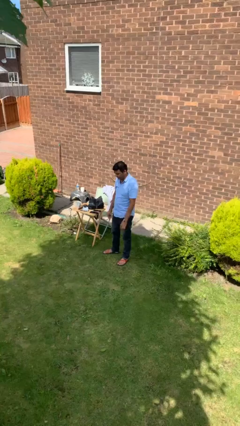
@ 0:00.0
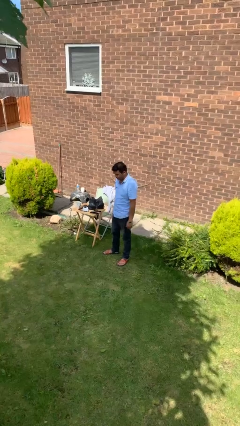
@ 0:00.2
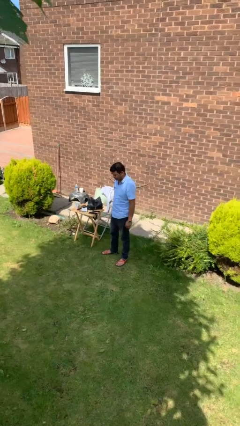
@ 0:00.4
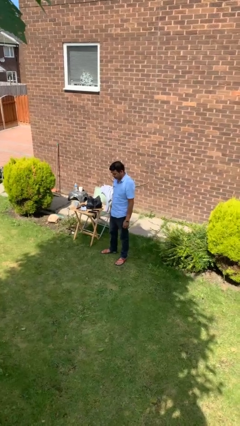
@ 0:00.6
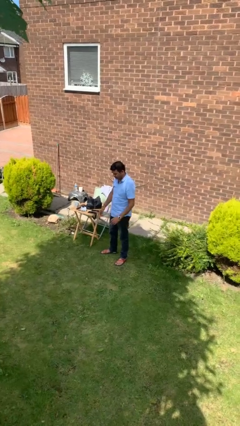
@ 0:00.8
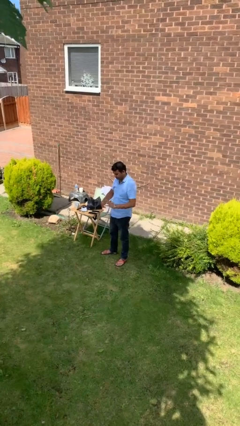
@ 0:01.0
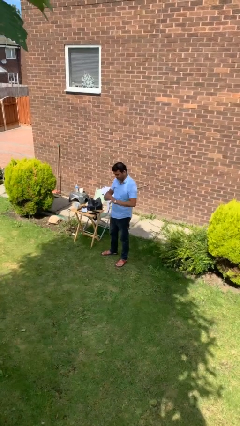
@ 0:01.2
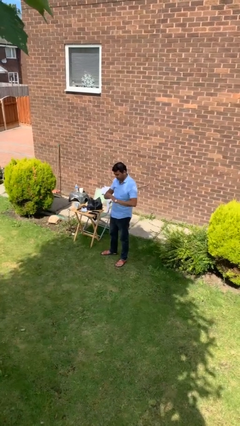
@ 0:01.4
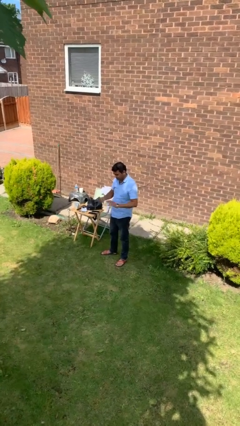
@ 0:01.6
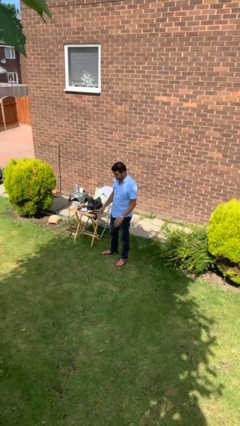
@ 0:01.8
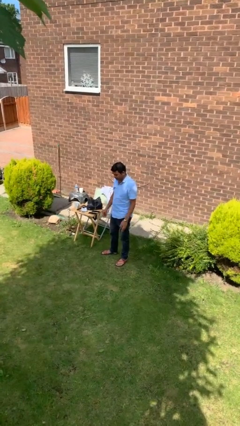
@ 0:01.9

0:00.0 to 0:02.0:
person takes off ring

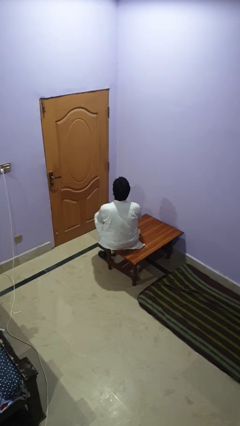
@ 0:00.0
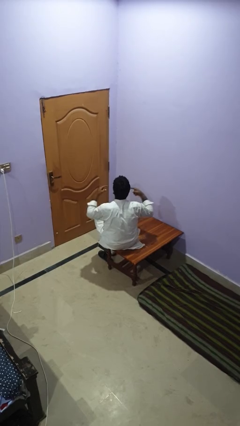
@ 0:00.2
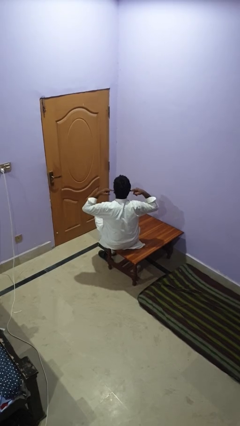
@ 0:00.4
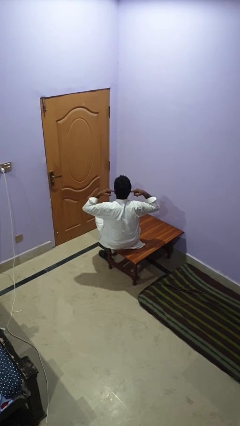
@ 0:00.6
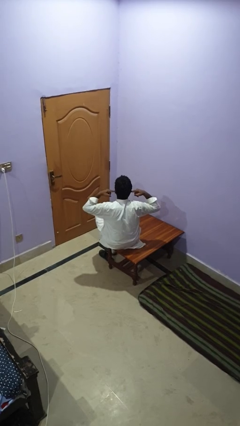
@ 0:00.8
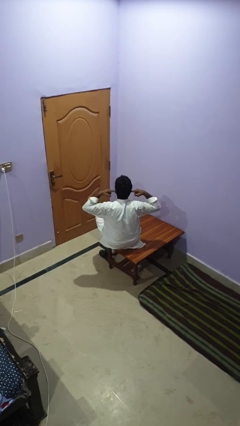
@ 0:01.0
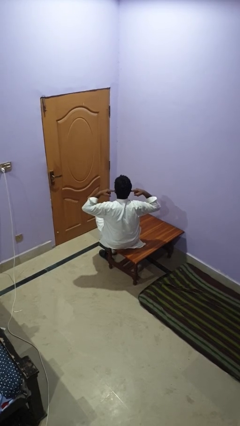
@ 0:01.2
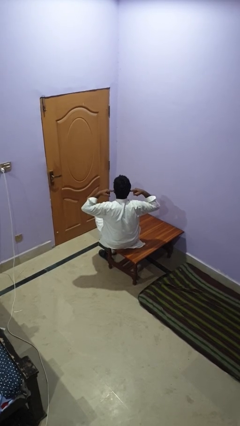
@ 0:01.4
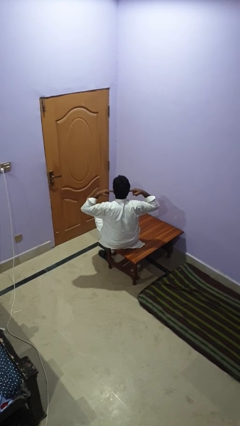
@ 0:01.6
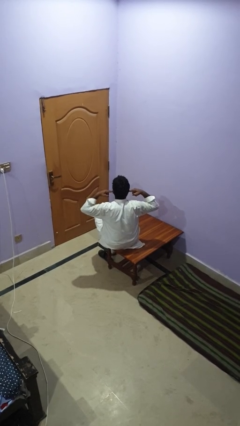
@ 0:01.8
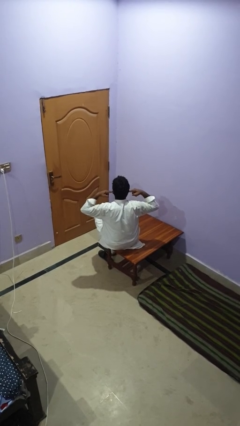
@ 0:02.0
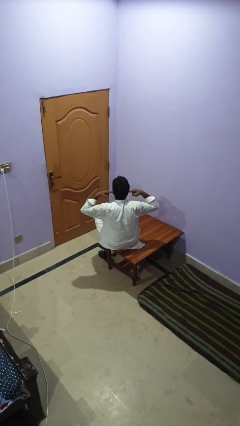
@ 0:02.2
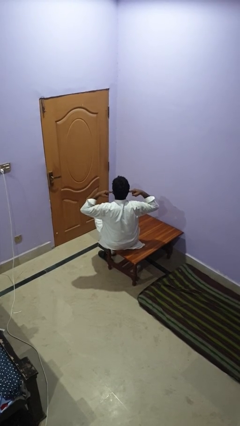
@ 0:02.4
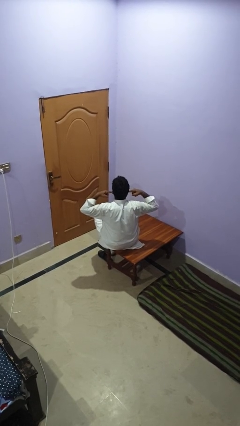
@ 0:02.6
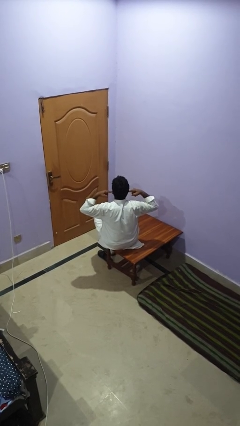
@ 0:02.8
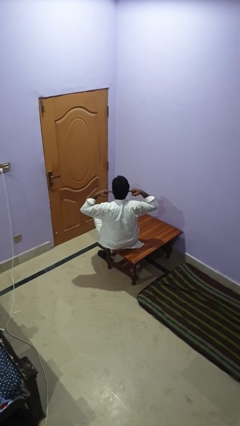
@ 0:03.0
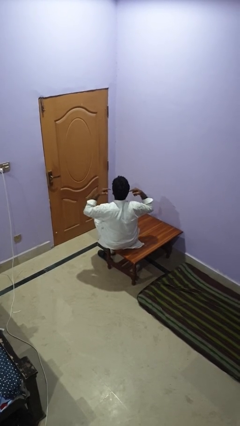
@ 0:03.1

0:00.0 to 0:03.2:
person puts fingers in ear

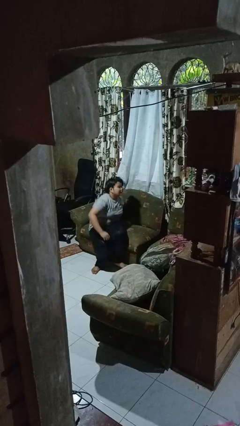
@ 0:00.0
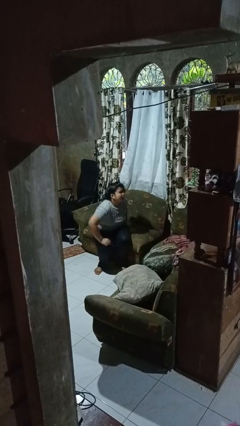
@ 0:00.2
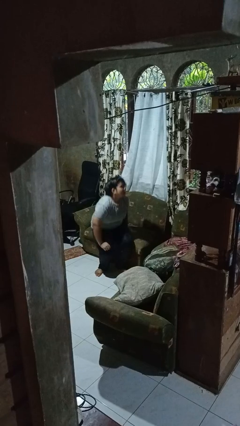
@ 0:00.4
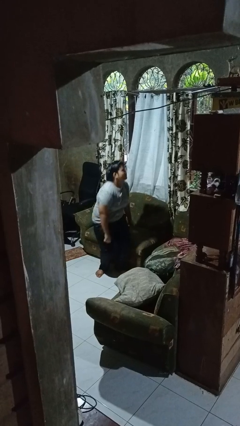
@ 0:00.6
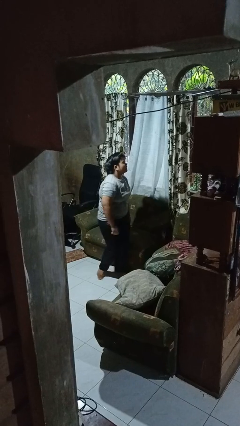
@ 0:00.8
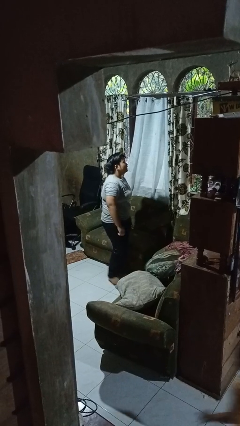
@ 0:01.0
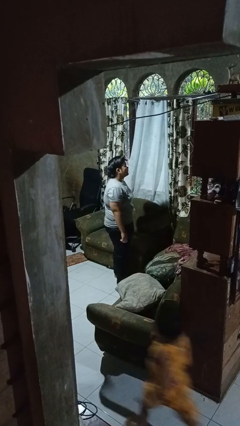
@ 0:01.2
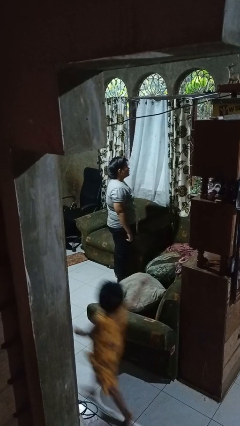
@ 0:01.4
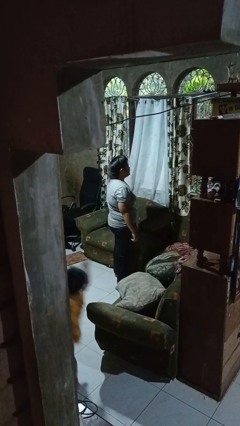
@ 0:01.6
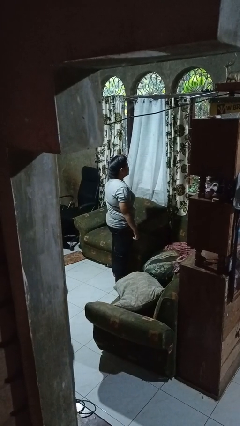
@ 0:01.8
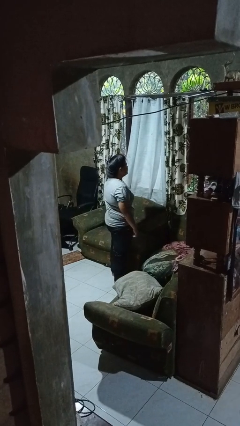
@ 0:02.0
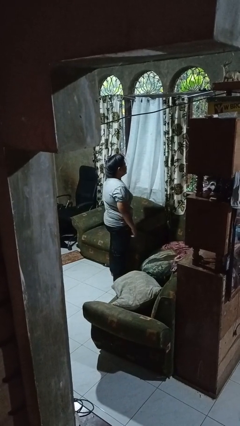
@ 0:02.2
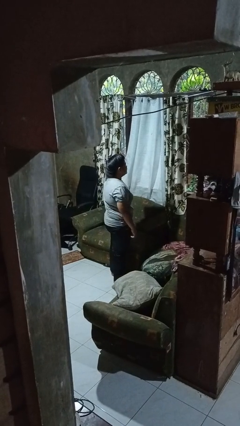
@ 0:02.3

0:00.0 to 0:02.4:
person stands up

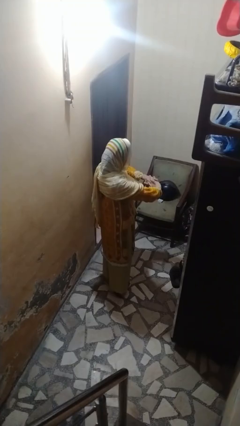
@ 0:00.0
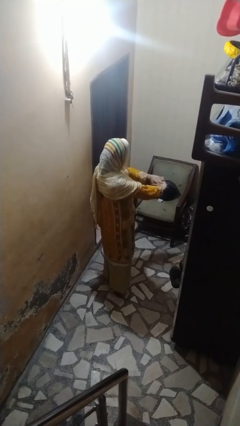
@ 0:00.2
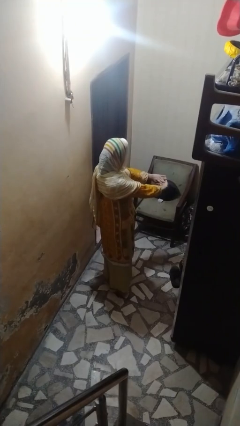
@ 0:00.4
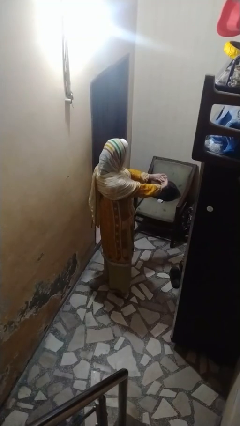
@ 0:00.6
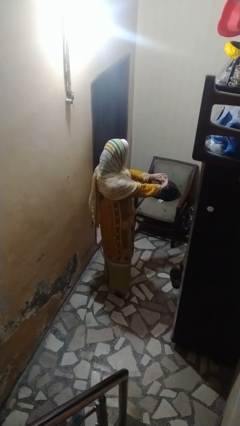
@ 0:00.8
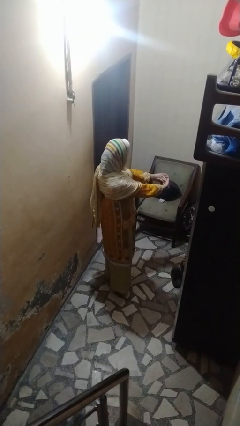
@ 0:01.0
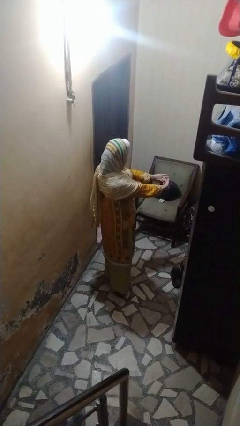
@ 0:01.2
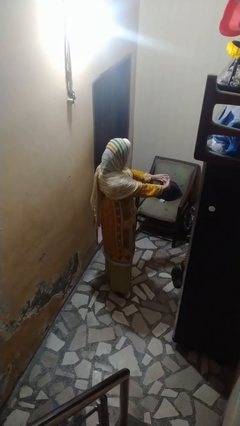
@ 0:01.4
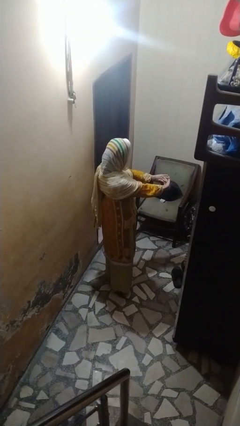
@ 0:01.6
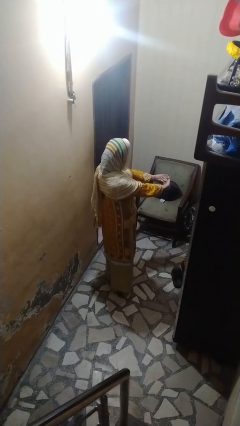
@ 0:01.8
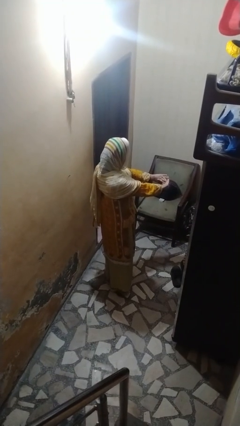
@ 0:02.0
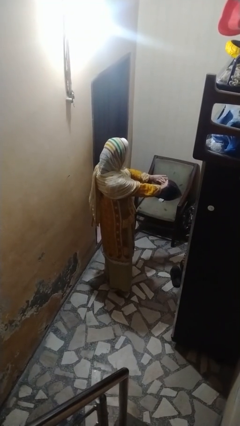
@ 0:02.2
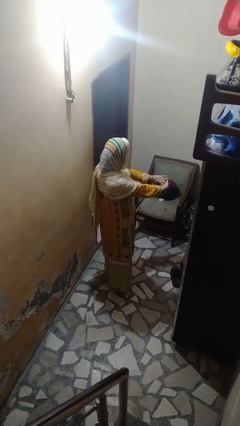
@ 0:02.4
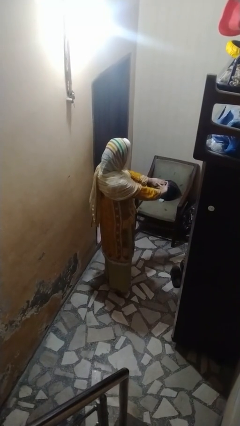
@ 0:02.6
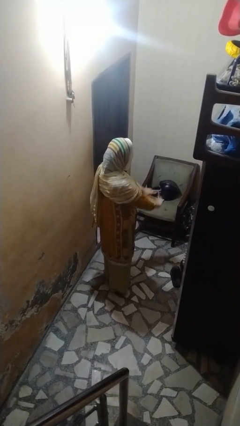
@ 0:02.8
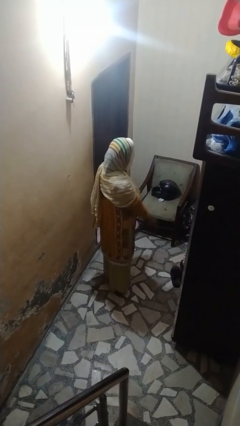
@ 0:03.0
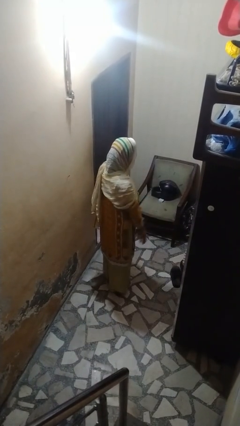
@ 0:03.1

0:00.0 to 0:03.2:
person cracks knuckles

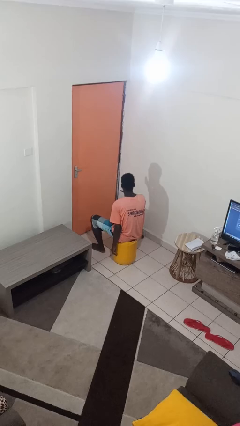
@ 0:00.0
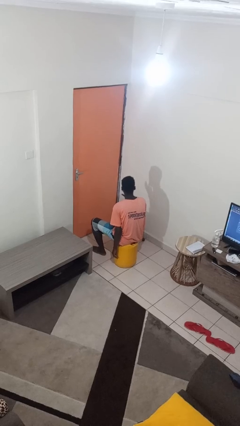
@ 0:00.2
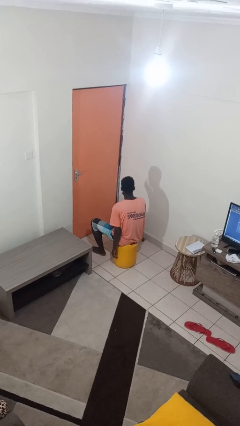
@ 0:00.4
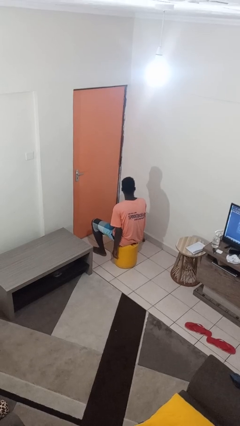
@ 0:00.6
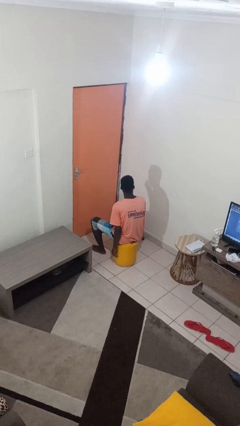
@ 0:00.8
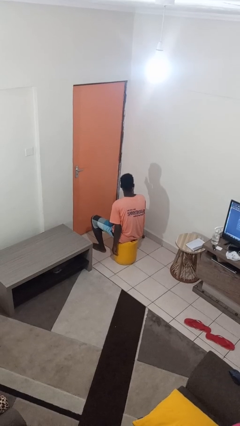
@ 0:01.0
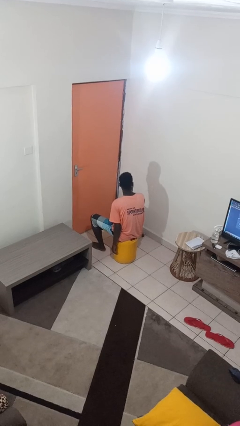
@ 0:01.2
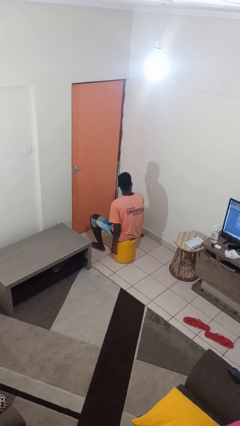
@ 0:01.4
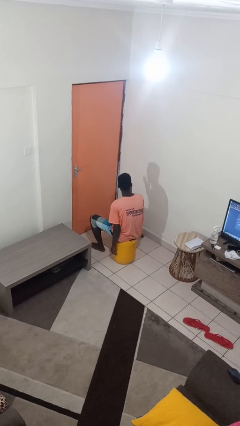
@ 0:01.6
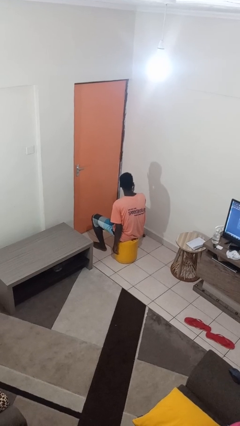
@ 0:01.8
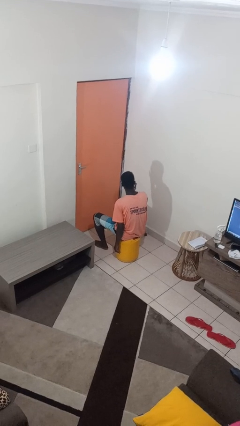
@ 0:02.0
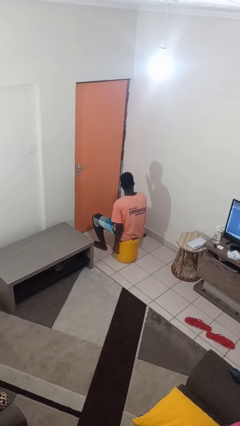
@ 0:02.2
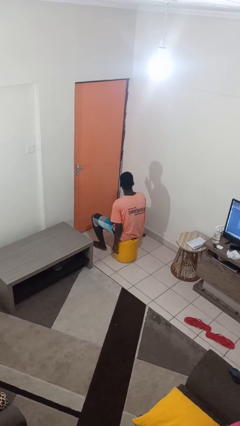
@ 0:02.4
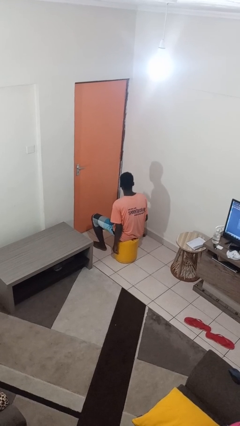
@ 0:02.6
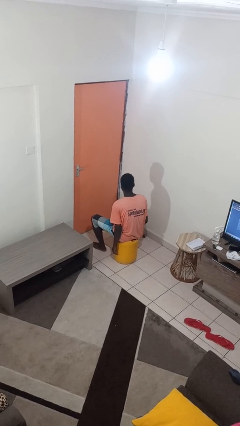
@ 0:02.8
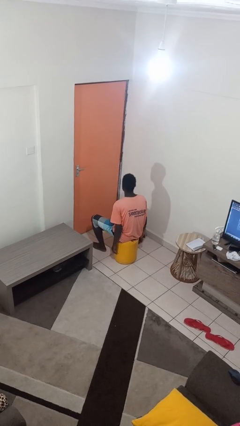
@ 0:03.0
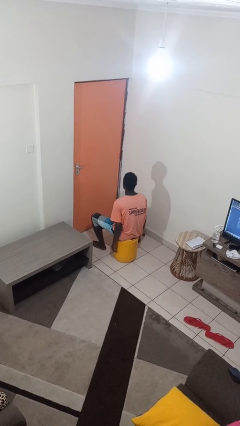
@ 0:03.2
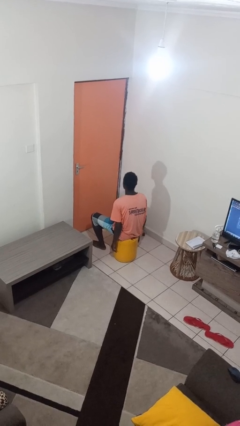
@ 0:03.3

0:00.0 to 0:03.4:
person licks fingers

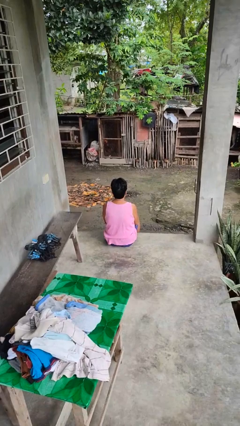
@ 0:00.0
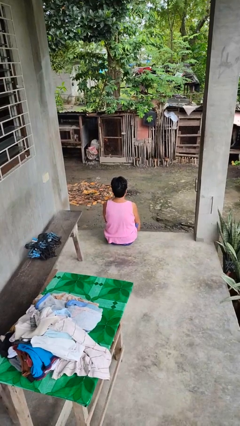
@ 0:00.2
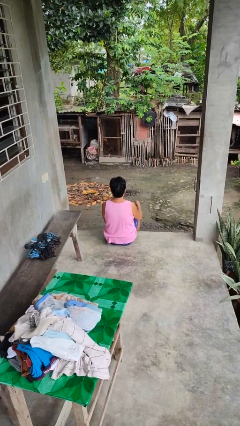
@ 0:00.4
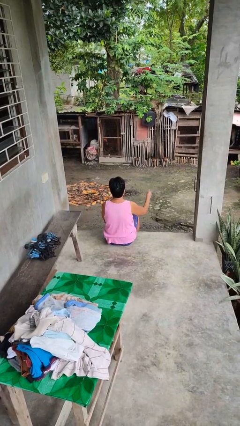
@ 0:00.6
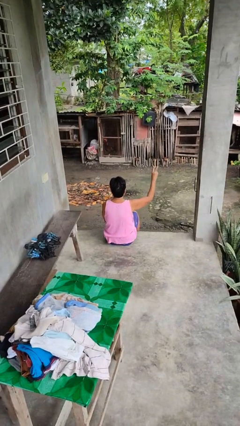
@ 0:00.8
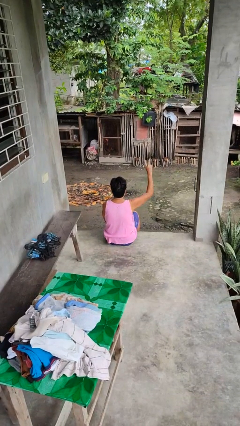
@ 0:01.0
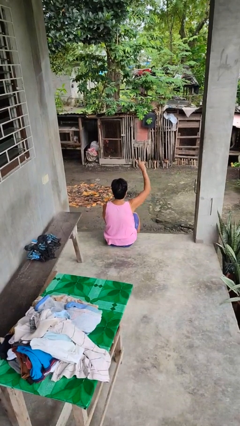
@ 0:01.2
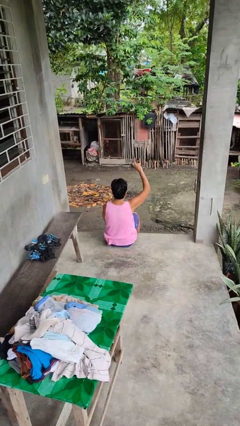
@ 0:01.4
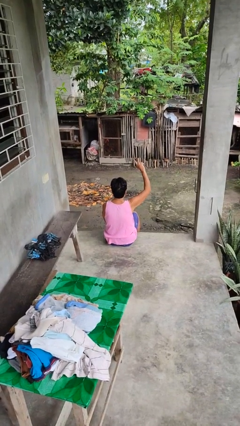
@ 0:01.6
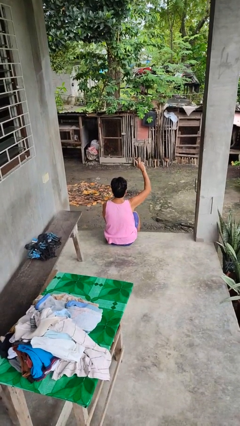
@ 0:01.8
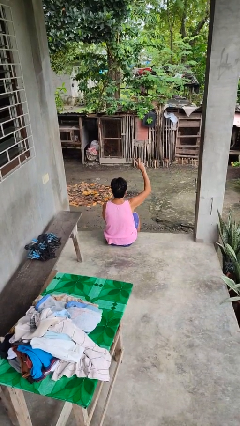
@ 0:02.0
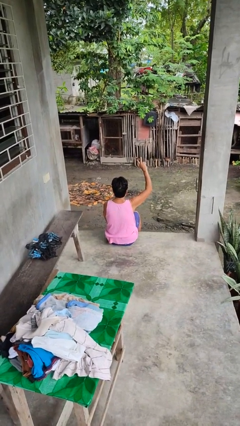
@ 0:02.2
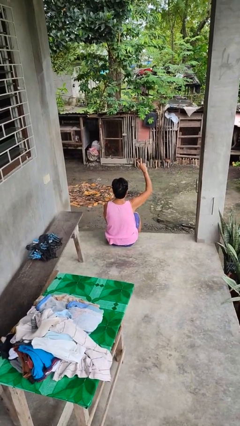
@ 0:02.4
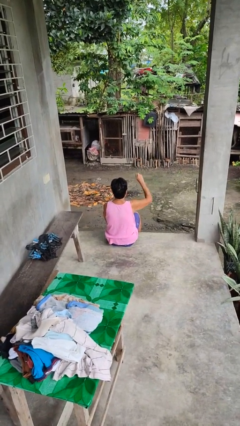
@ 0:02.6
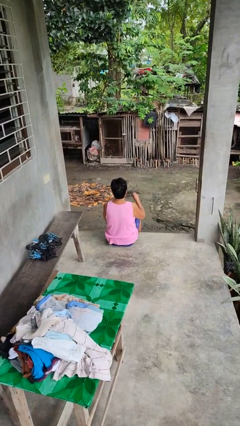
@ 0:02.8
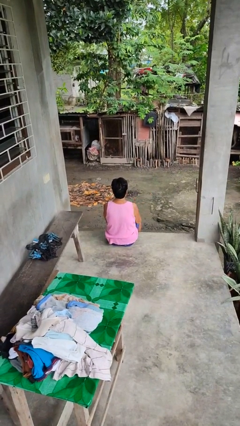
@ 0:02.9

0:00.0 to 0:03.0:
person gestures peace
